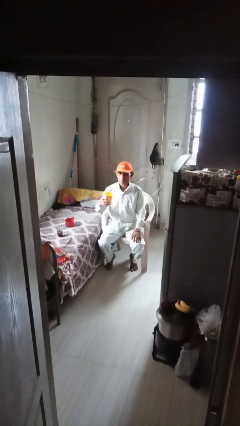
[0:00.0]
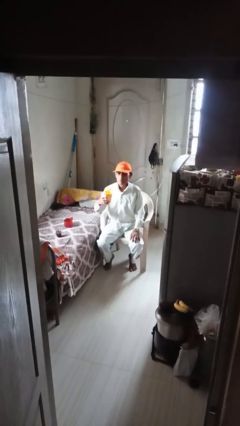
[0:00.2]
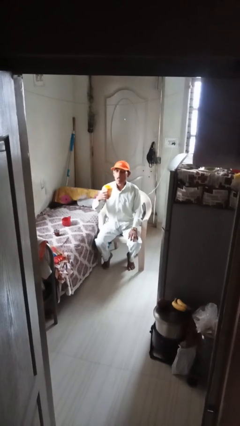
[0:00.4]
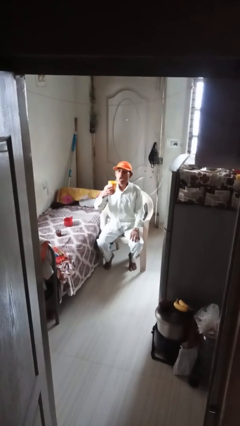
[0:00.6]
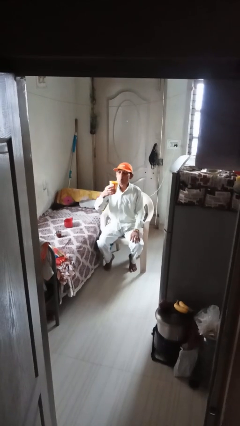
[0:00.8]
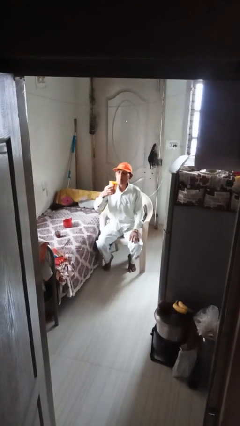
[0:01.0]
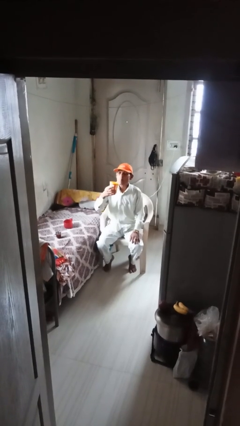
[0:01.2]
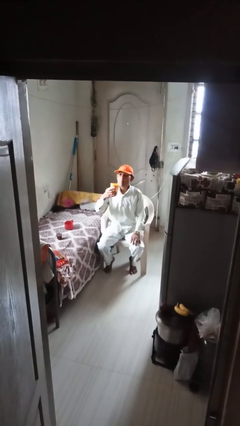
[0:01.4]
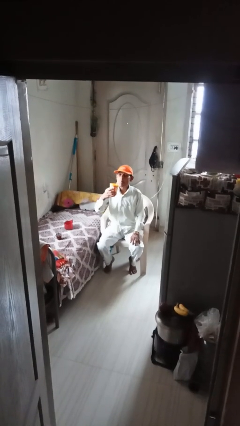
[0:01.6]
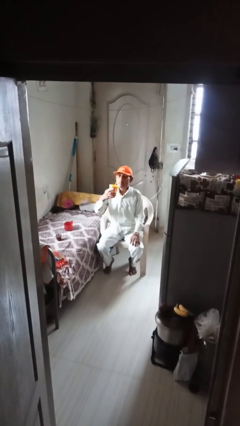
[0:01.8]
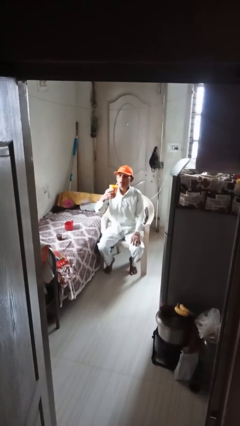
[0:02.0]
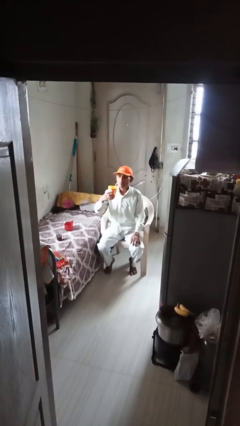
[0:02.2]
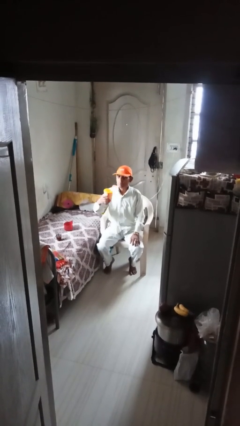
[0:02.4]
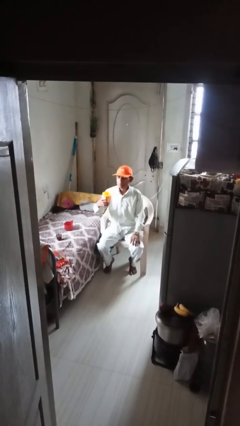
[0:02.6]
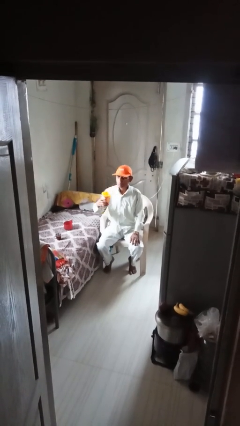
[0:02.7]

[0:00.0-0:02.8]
person drinks from straw

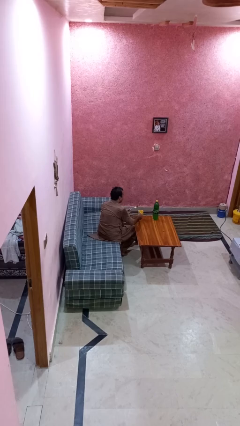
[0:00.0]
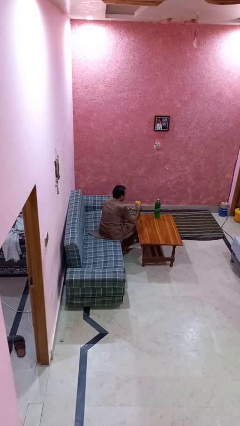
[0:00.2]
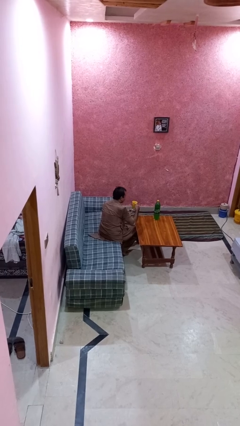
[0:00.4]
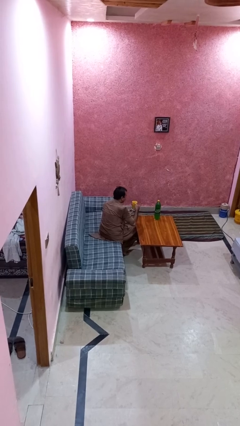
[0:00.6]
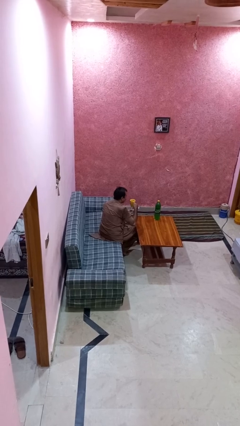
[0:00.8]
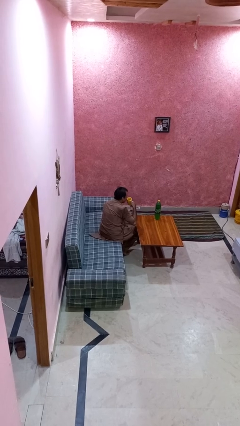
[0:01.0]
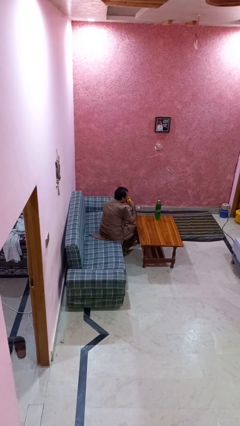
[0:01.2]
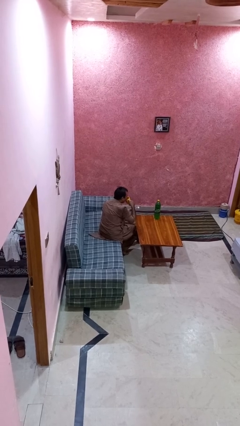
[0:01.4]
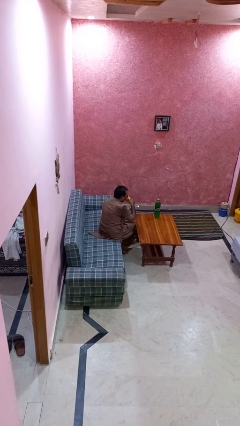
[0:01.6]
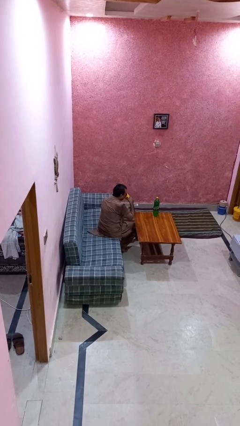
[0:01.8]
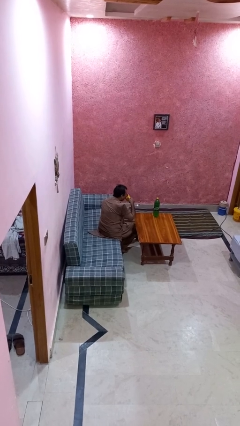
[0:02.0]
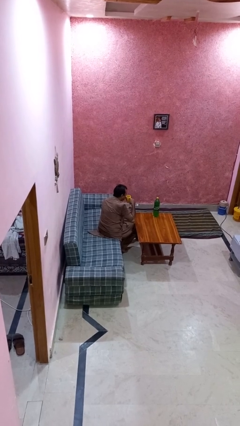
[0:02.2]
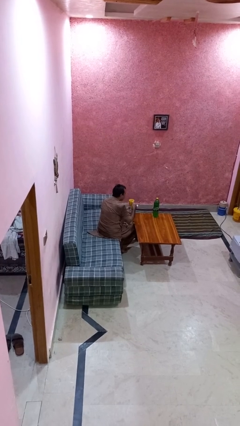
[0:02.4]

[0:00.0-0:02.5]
person drinks from mug

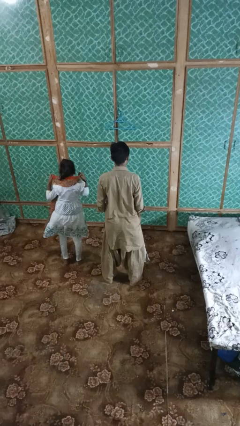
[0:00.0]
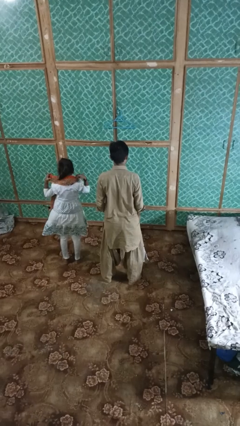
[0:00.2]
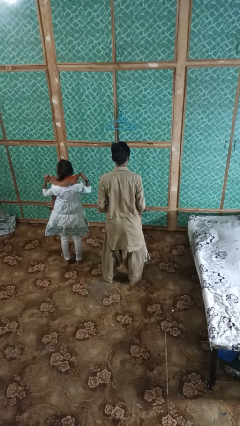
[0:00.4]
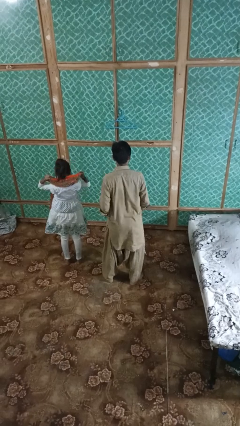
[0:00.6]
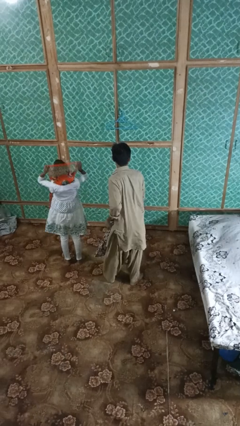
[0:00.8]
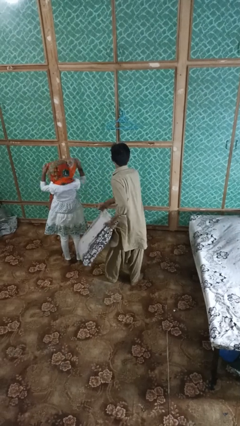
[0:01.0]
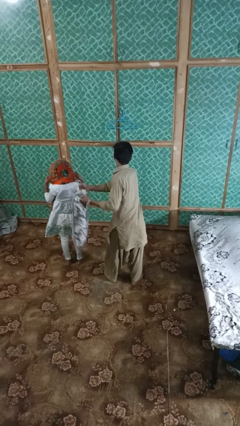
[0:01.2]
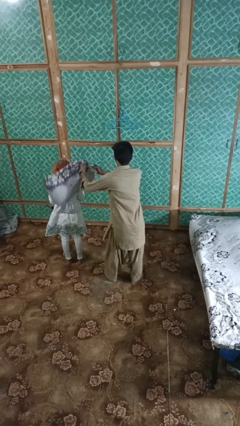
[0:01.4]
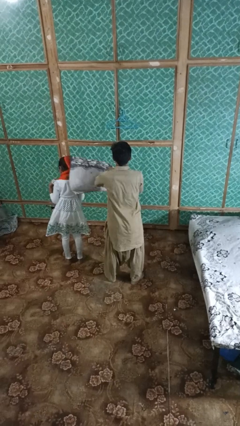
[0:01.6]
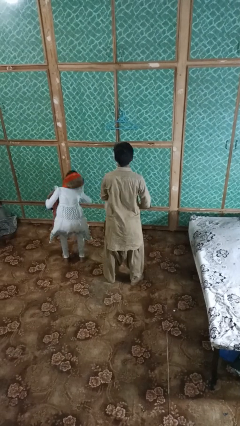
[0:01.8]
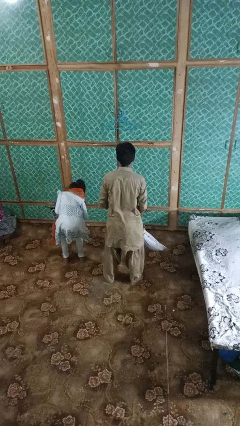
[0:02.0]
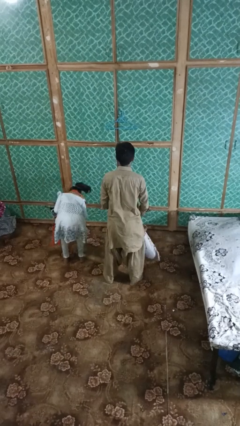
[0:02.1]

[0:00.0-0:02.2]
person hits person with pillow

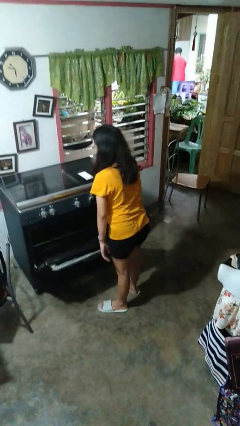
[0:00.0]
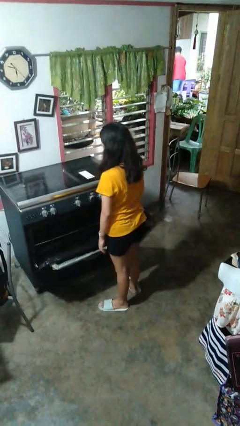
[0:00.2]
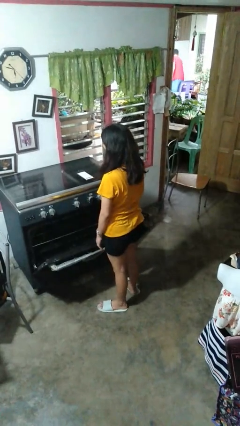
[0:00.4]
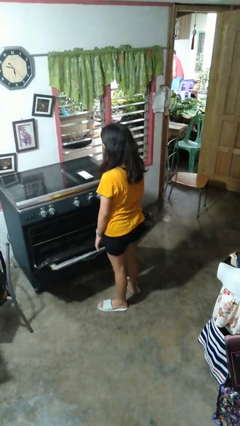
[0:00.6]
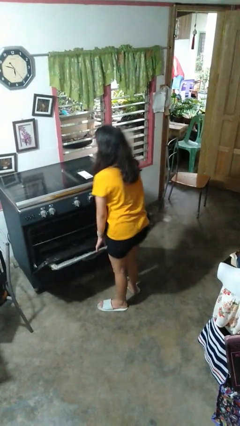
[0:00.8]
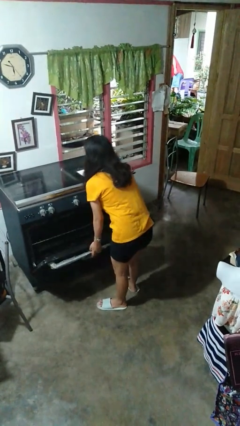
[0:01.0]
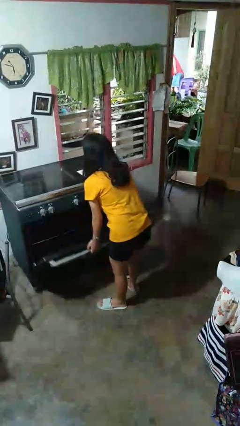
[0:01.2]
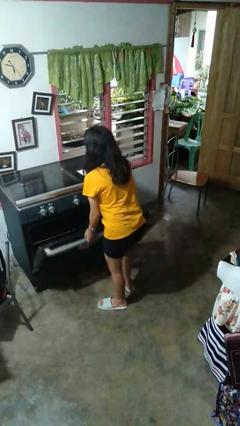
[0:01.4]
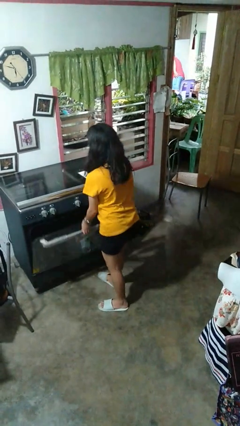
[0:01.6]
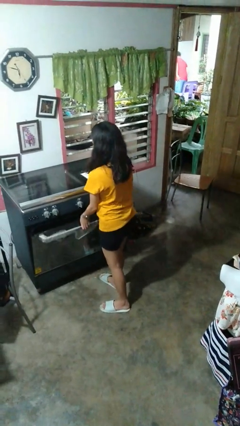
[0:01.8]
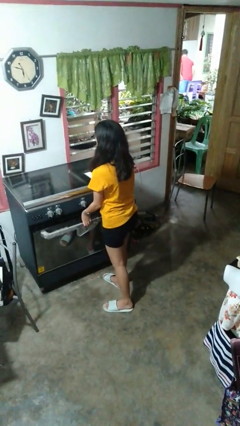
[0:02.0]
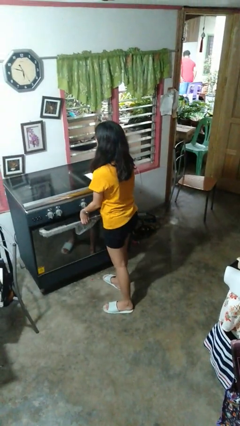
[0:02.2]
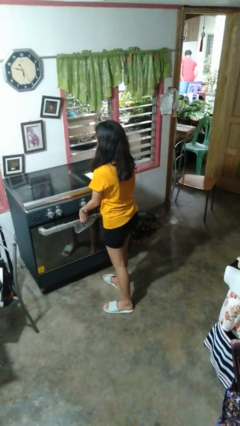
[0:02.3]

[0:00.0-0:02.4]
person closes oven door

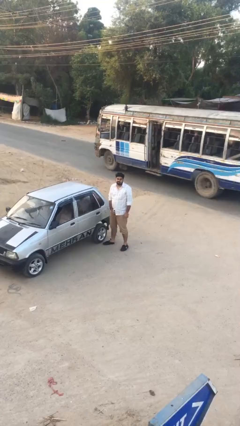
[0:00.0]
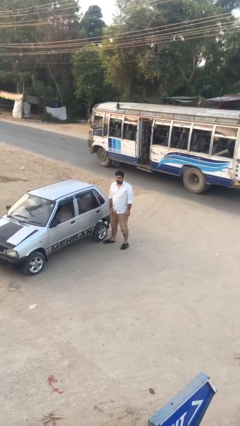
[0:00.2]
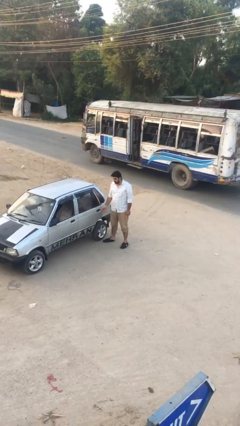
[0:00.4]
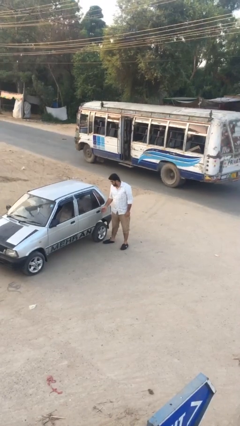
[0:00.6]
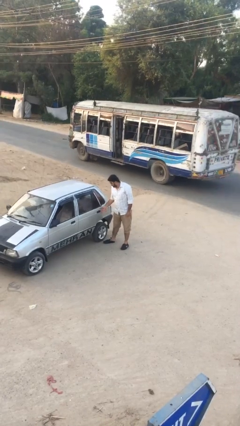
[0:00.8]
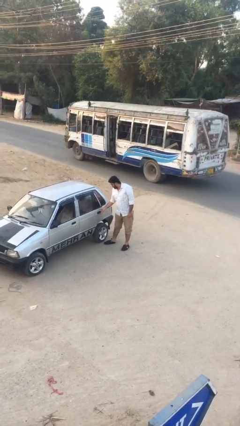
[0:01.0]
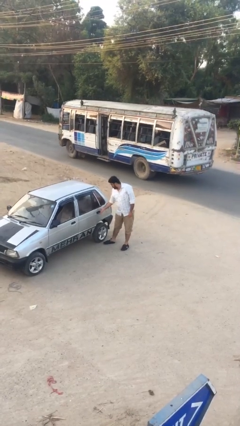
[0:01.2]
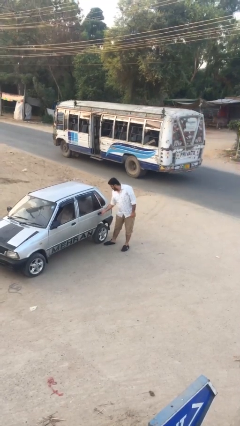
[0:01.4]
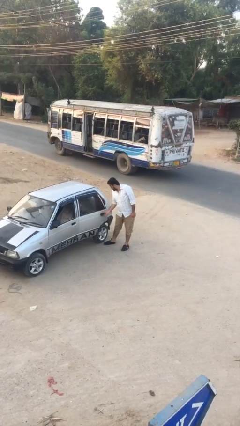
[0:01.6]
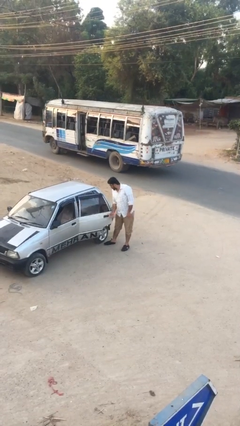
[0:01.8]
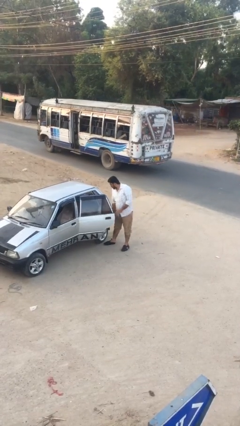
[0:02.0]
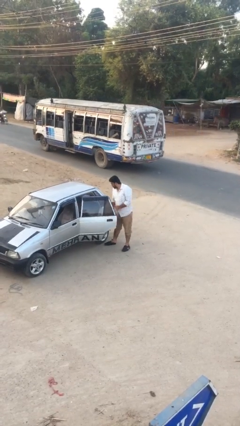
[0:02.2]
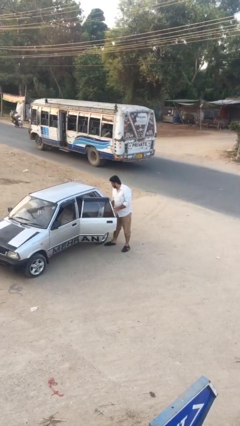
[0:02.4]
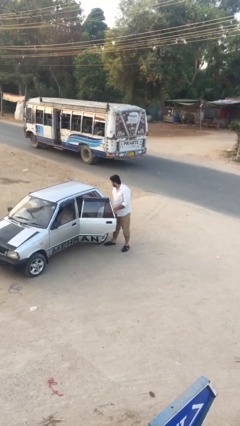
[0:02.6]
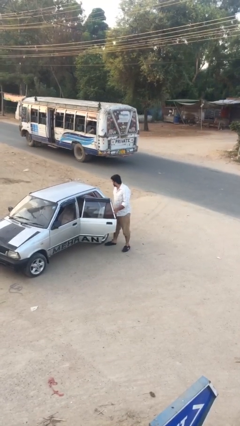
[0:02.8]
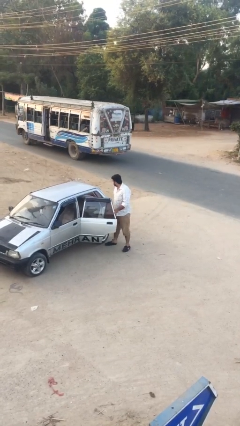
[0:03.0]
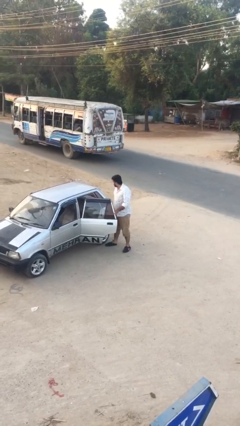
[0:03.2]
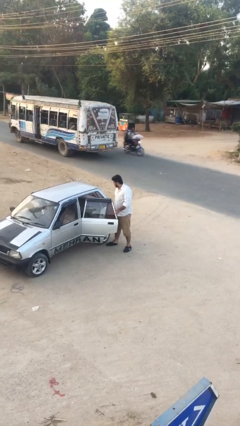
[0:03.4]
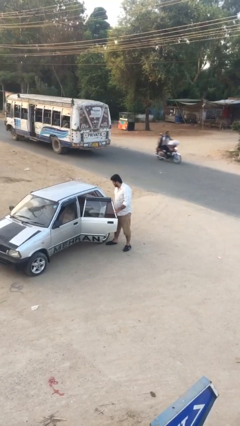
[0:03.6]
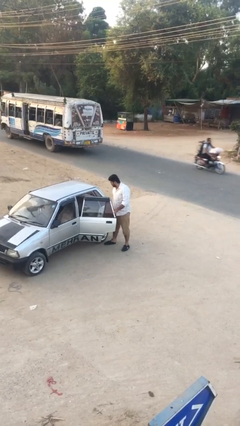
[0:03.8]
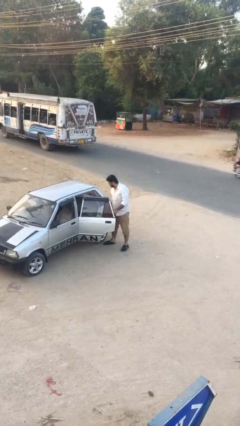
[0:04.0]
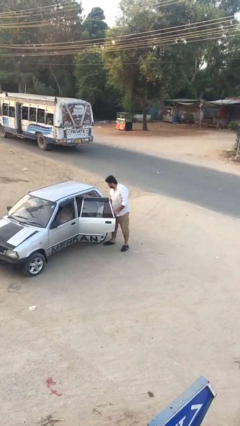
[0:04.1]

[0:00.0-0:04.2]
person opens car door

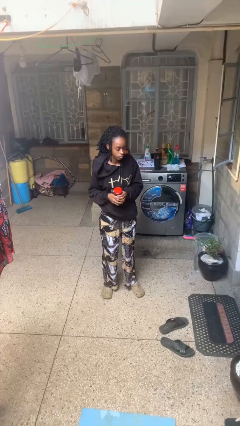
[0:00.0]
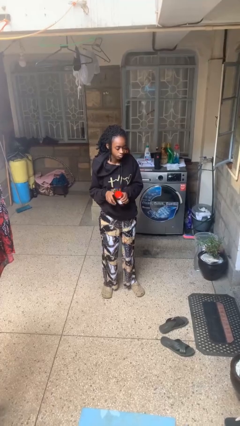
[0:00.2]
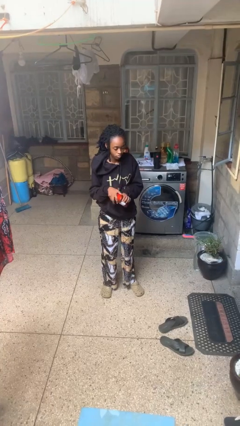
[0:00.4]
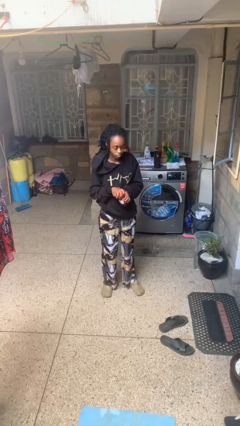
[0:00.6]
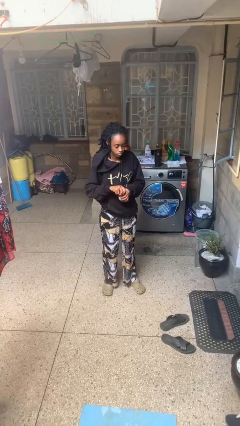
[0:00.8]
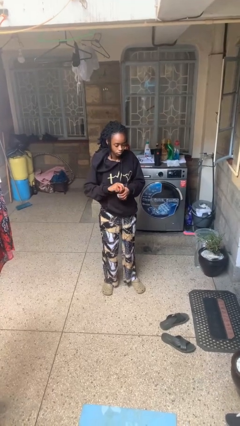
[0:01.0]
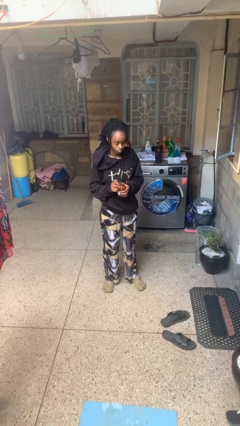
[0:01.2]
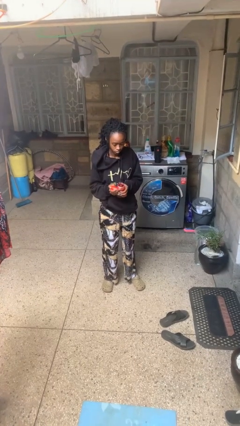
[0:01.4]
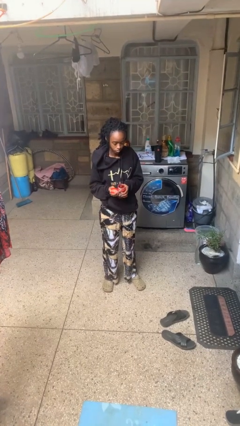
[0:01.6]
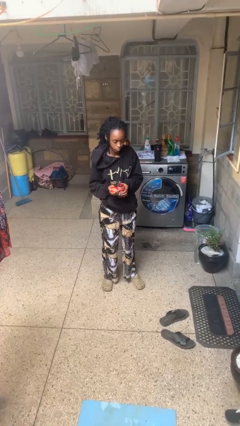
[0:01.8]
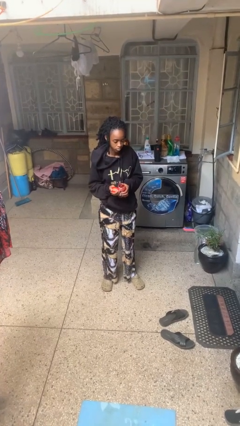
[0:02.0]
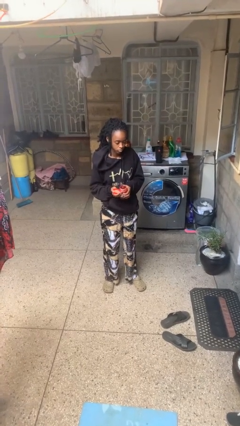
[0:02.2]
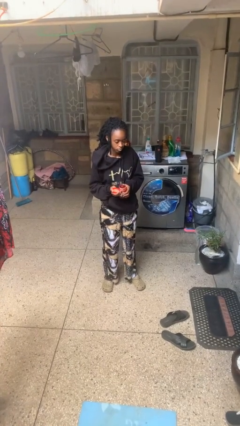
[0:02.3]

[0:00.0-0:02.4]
person opens jar

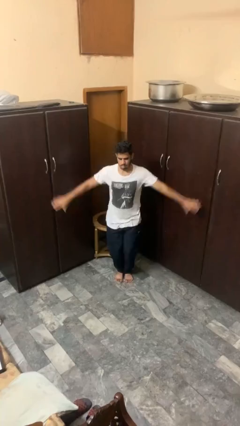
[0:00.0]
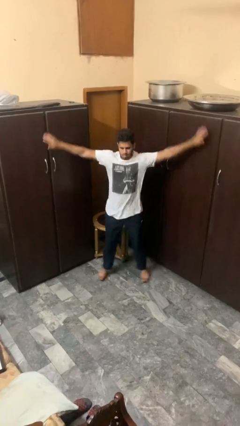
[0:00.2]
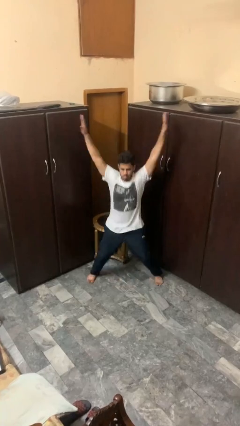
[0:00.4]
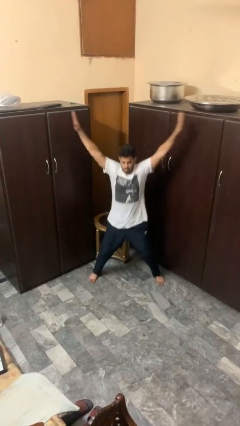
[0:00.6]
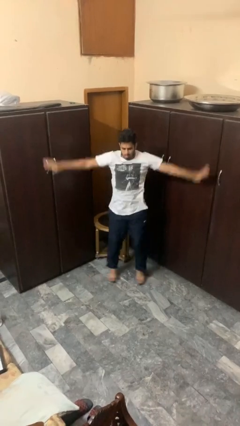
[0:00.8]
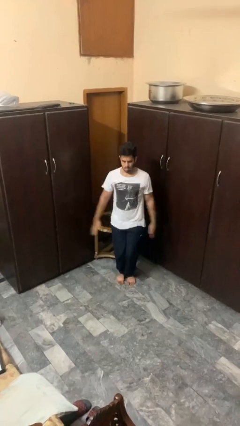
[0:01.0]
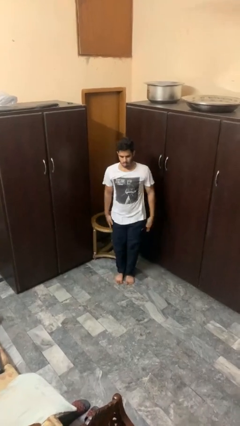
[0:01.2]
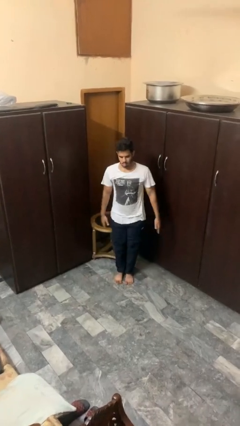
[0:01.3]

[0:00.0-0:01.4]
person exercises with jumping jacks
